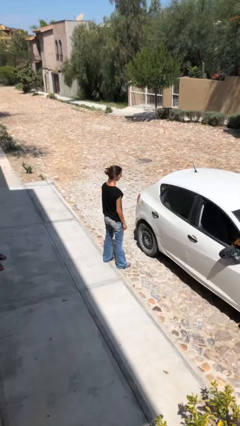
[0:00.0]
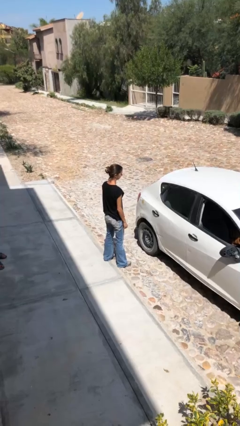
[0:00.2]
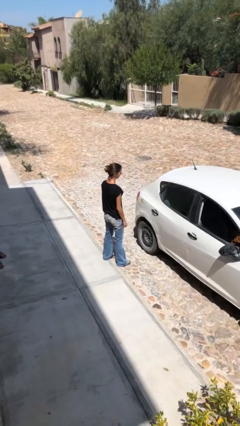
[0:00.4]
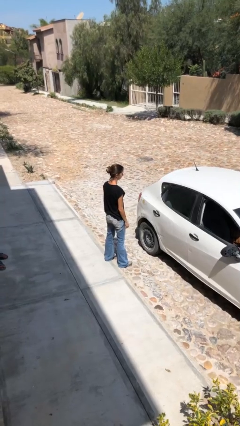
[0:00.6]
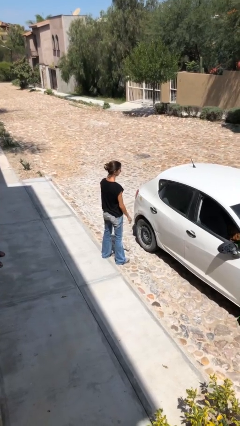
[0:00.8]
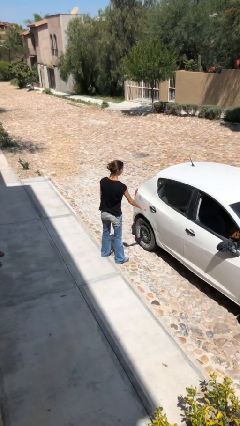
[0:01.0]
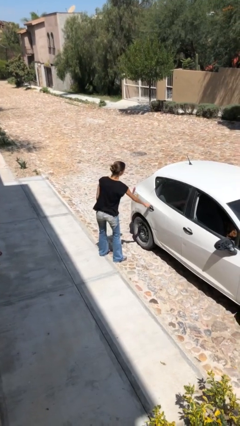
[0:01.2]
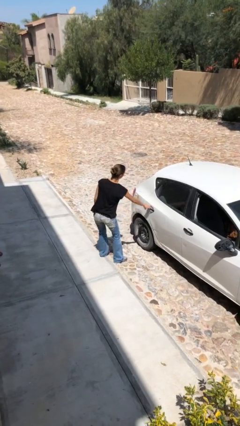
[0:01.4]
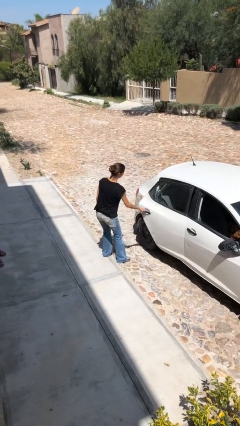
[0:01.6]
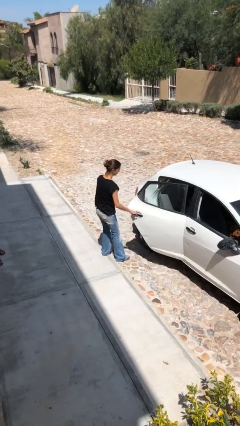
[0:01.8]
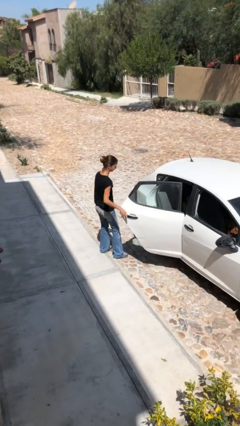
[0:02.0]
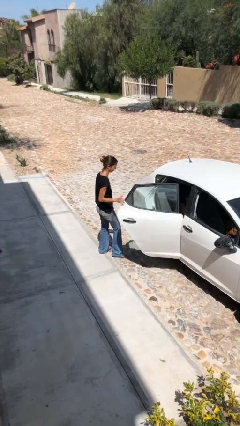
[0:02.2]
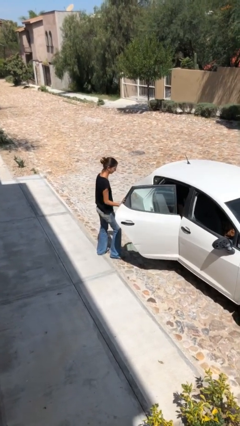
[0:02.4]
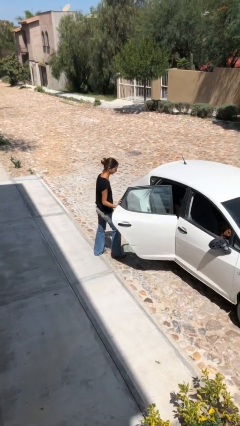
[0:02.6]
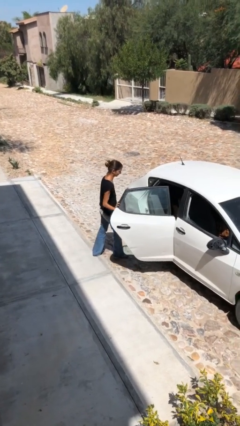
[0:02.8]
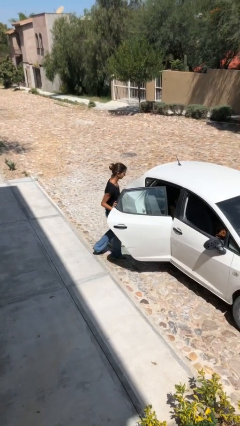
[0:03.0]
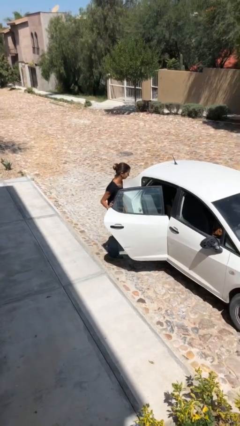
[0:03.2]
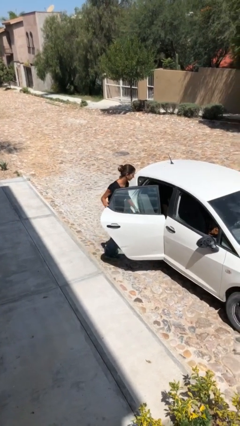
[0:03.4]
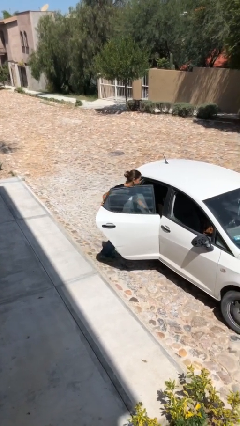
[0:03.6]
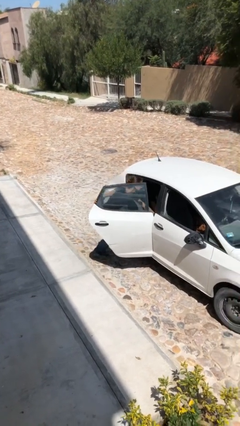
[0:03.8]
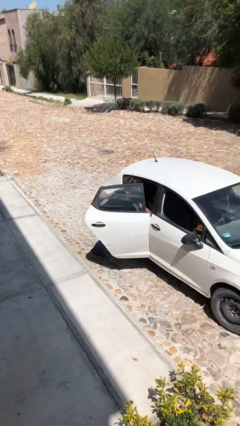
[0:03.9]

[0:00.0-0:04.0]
person opens car door

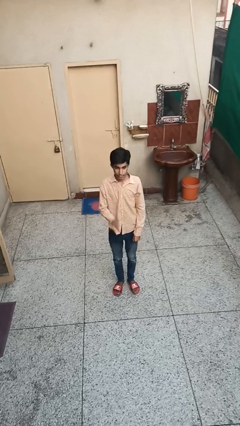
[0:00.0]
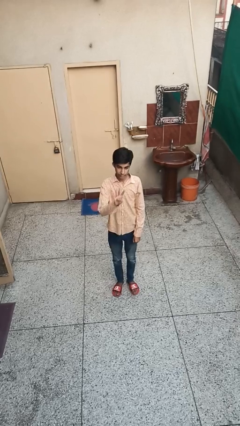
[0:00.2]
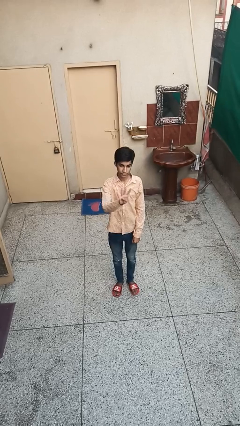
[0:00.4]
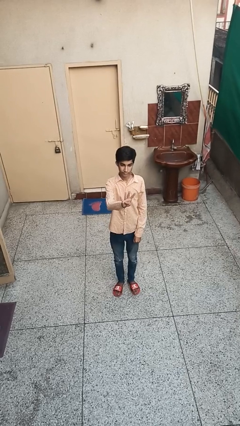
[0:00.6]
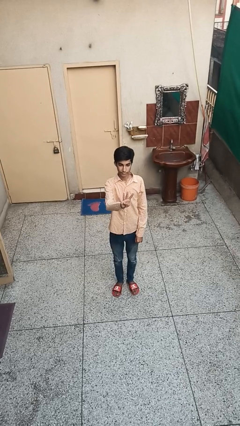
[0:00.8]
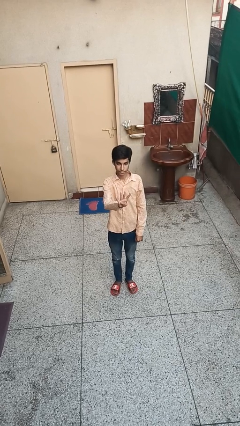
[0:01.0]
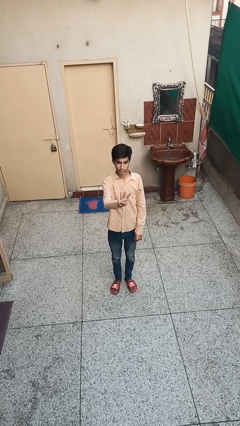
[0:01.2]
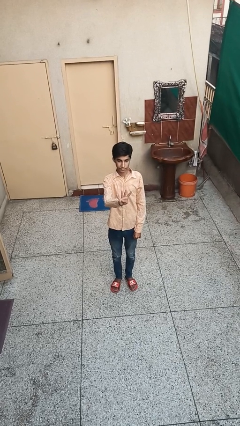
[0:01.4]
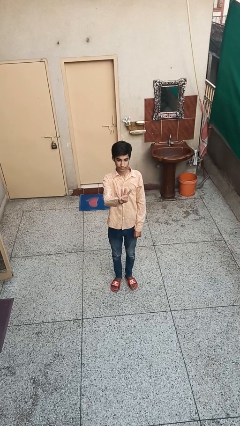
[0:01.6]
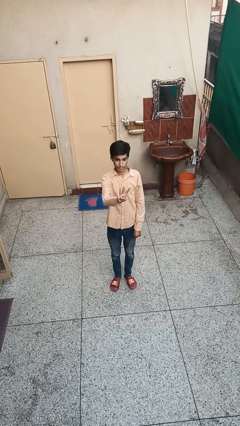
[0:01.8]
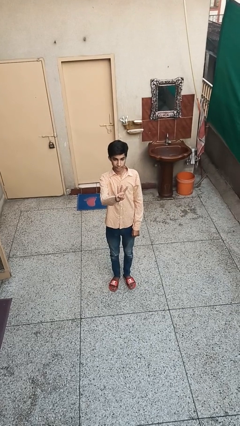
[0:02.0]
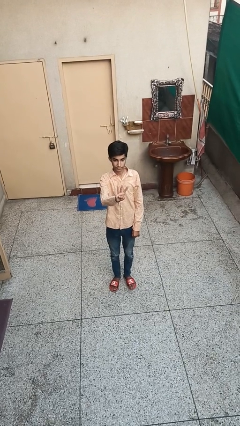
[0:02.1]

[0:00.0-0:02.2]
person gestures number four

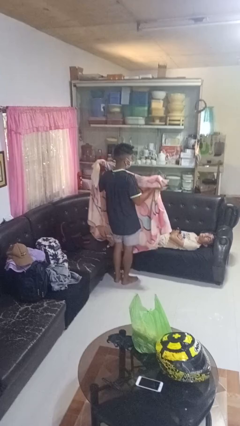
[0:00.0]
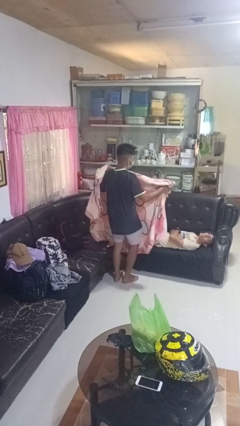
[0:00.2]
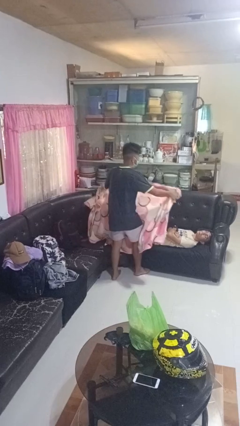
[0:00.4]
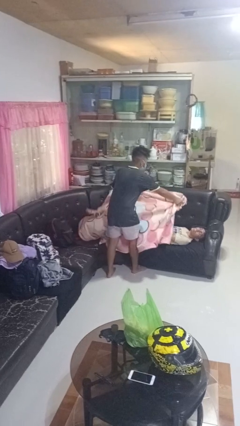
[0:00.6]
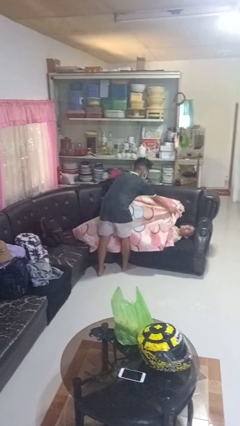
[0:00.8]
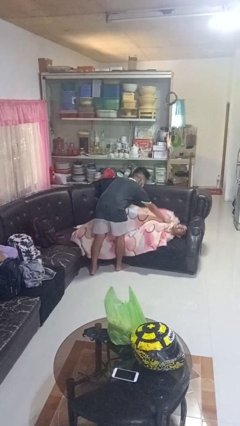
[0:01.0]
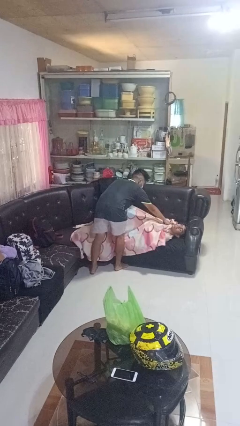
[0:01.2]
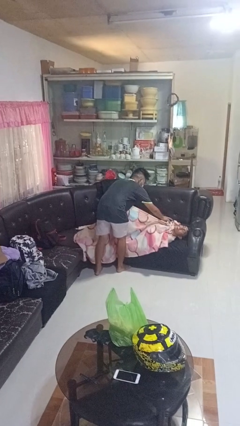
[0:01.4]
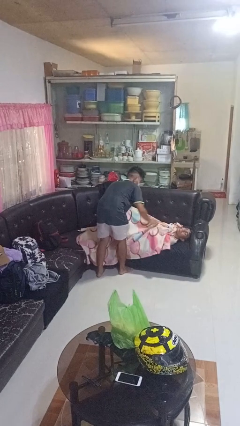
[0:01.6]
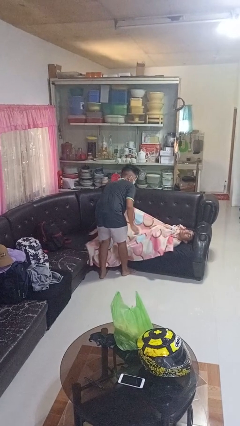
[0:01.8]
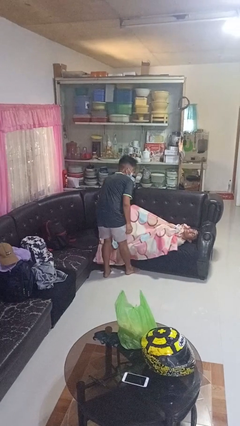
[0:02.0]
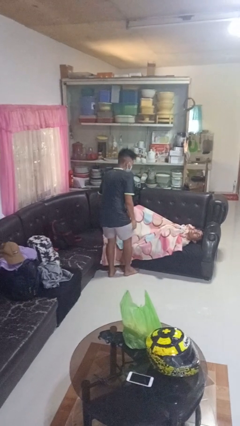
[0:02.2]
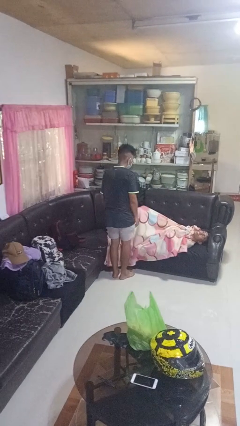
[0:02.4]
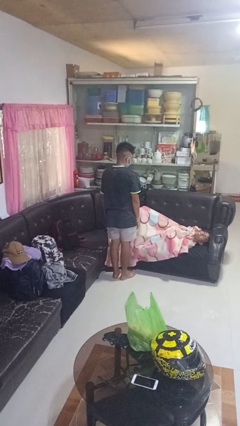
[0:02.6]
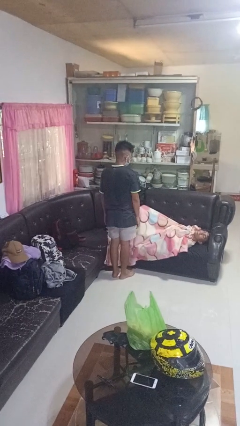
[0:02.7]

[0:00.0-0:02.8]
person covers friend with blanket

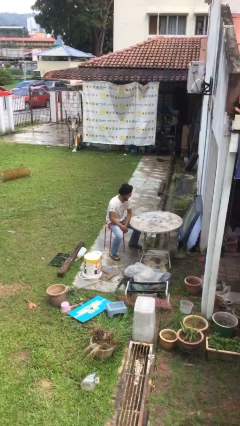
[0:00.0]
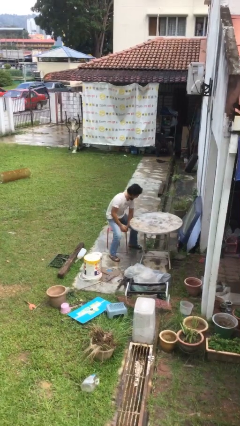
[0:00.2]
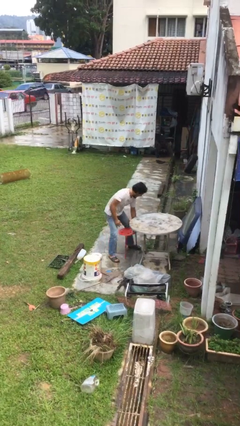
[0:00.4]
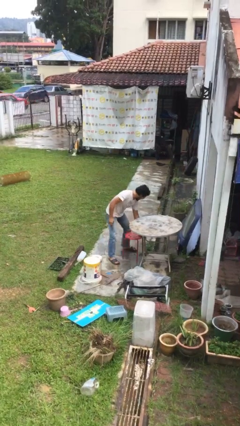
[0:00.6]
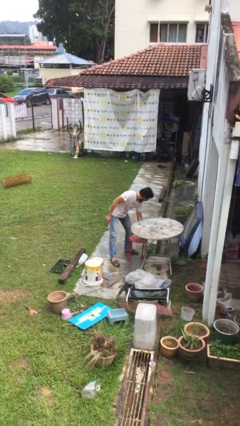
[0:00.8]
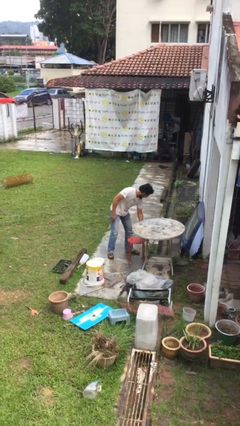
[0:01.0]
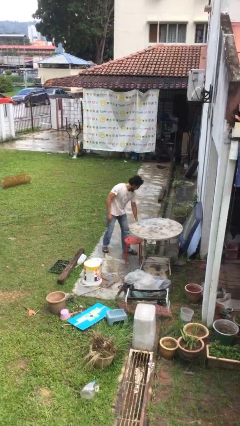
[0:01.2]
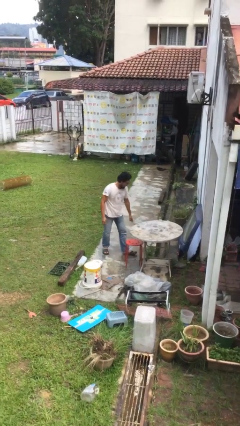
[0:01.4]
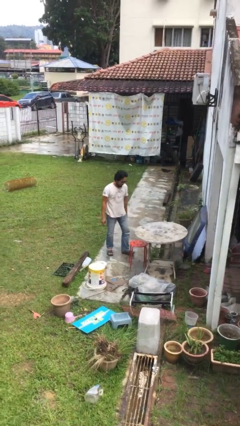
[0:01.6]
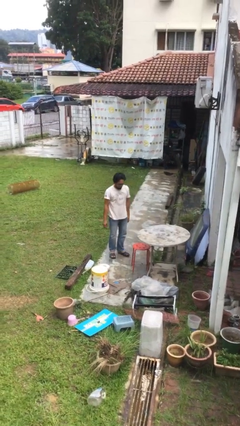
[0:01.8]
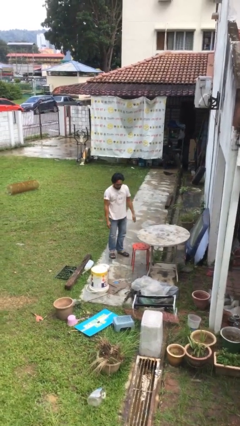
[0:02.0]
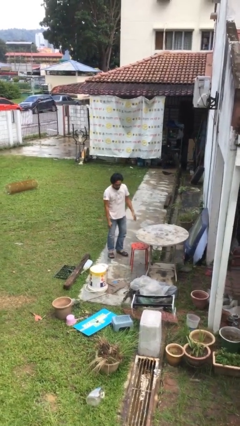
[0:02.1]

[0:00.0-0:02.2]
person stands up

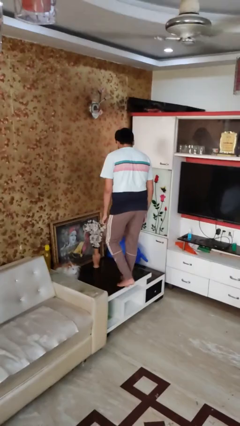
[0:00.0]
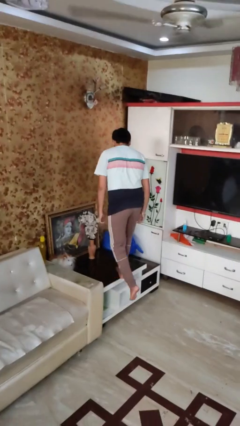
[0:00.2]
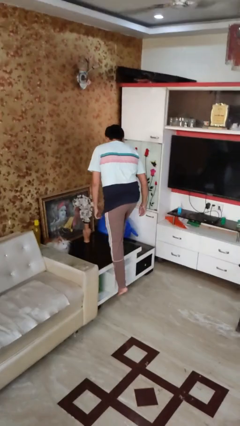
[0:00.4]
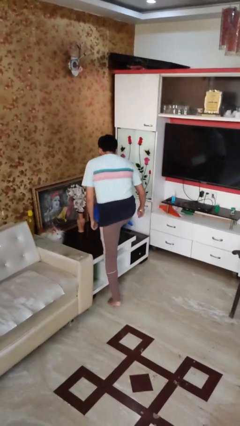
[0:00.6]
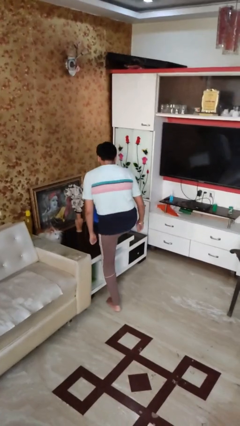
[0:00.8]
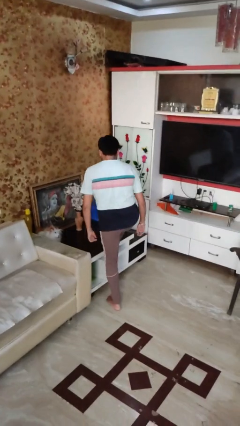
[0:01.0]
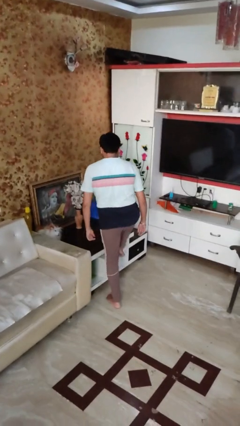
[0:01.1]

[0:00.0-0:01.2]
person climbs off table

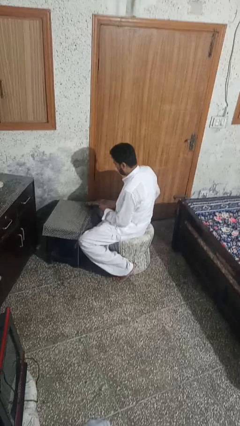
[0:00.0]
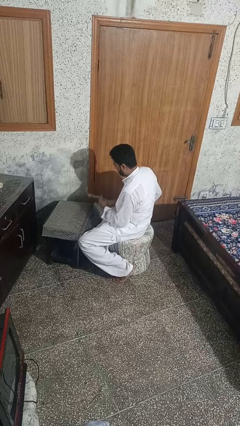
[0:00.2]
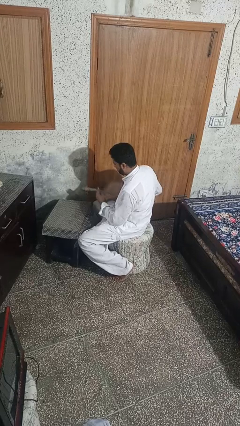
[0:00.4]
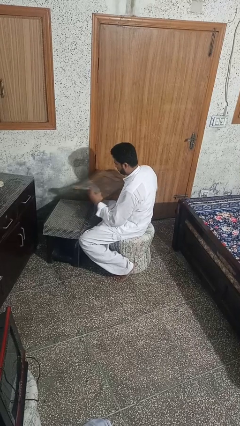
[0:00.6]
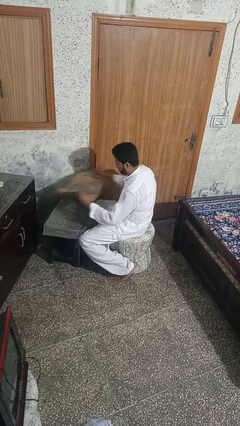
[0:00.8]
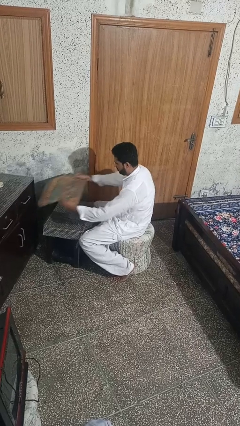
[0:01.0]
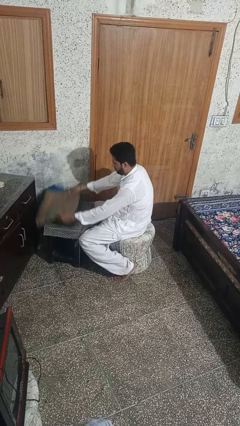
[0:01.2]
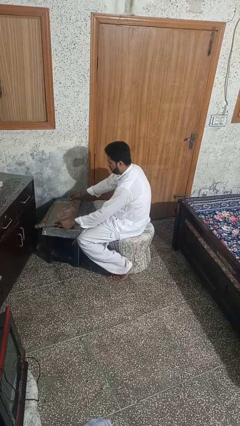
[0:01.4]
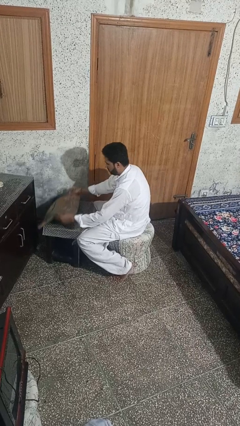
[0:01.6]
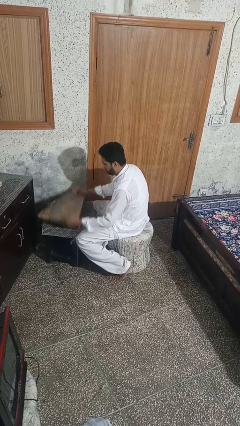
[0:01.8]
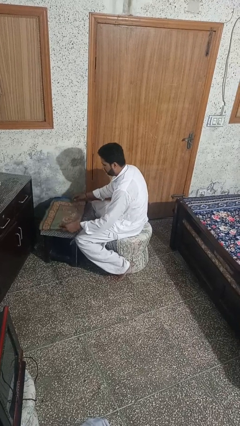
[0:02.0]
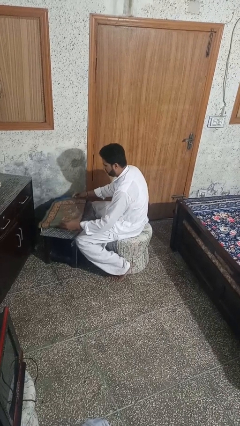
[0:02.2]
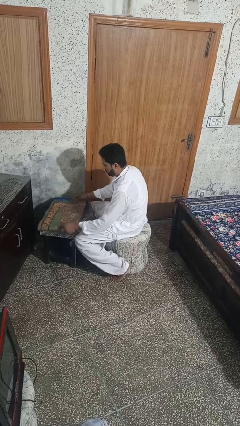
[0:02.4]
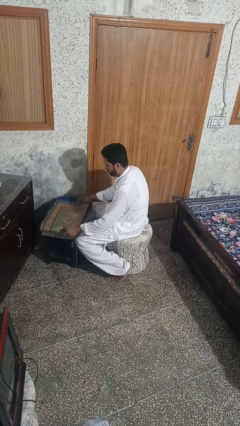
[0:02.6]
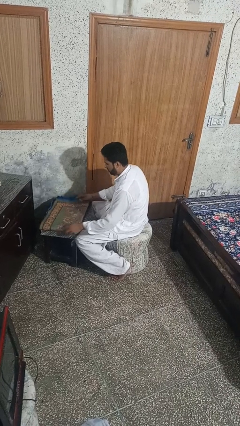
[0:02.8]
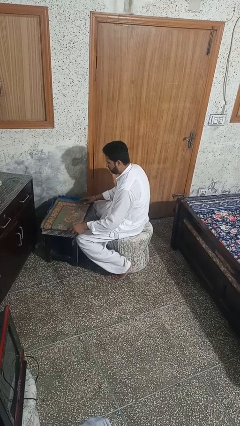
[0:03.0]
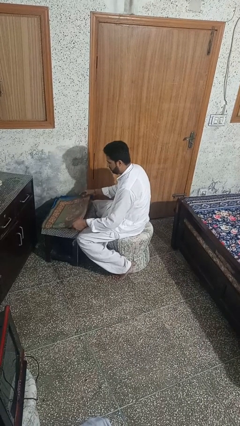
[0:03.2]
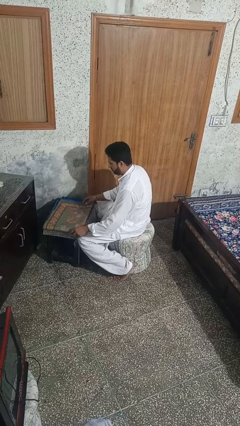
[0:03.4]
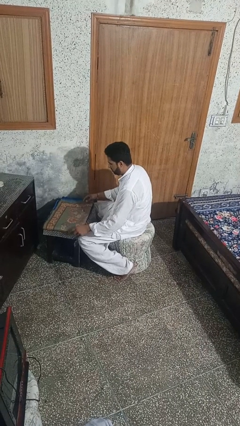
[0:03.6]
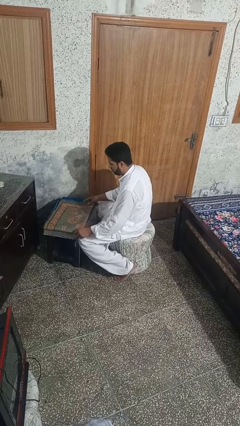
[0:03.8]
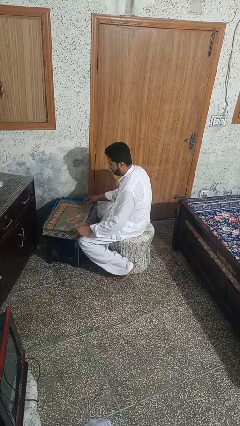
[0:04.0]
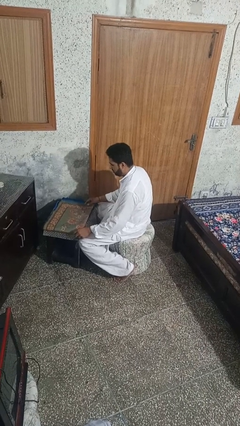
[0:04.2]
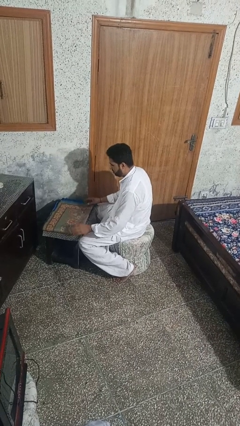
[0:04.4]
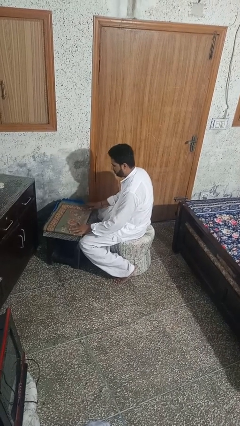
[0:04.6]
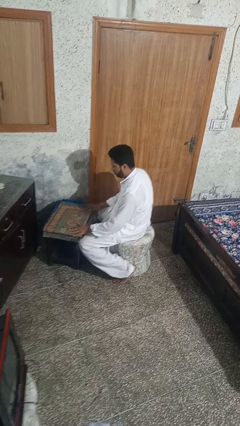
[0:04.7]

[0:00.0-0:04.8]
person spreads tablecloth
